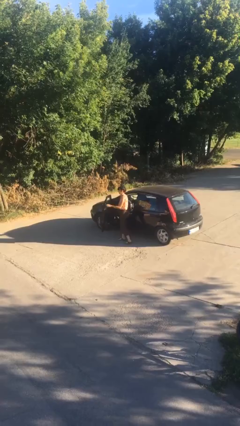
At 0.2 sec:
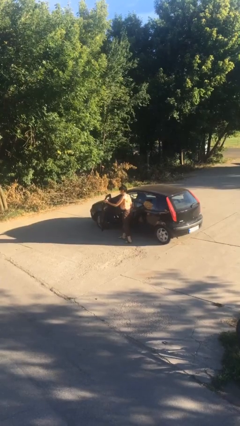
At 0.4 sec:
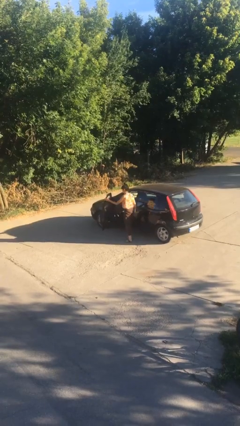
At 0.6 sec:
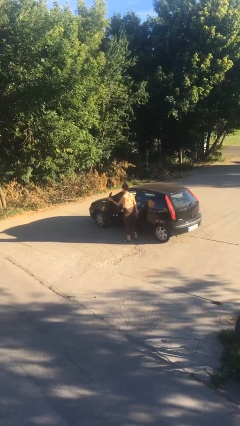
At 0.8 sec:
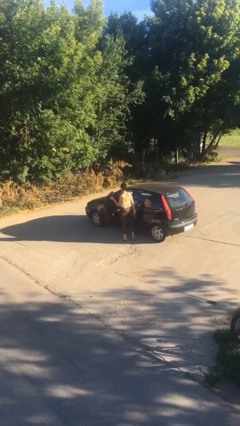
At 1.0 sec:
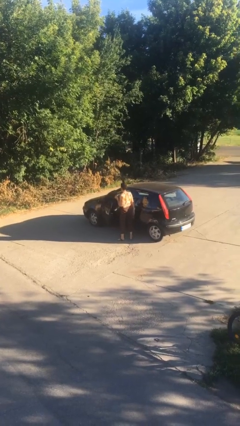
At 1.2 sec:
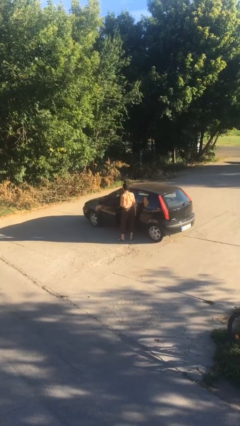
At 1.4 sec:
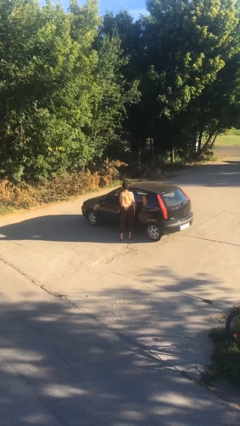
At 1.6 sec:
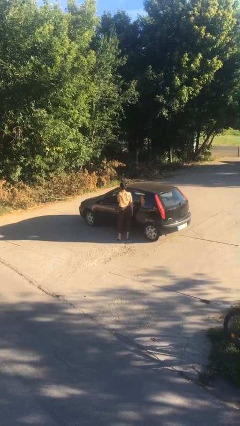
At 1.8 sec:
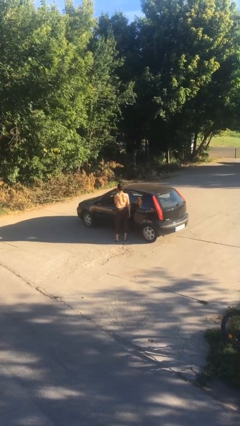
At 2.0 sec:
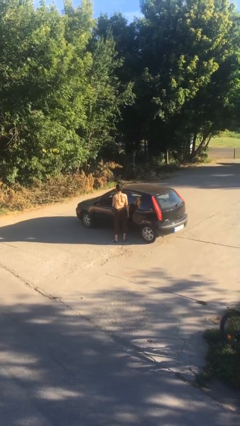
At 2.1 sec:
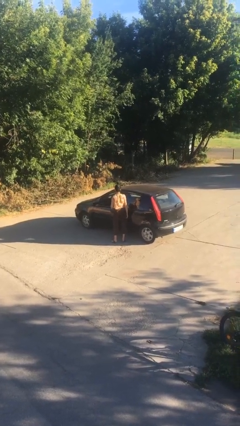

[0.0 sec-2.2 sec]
person closes car door

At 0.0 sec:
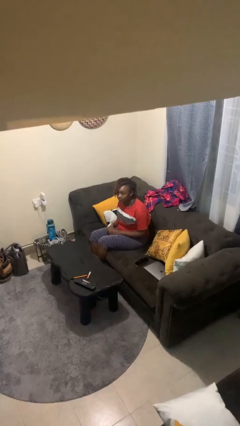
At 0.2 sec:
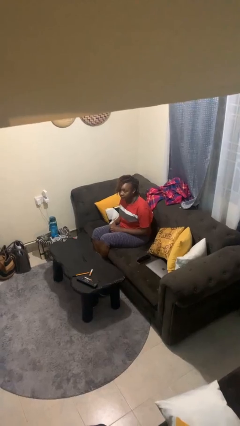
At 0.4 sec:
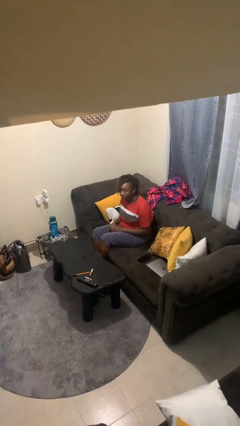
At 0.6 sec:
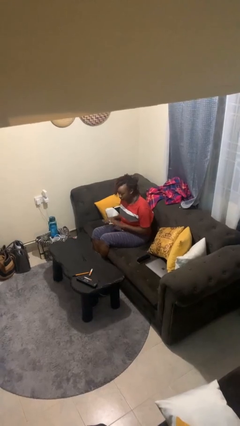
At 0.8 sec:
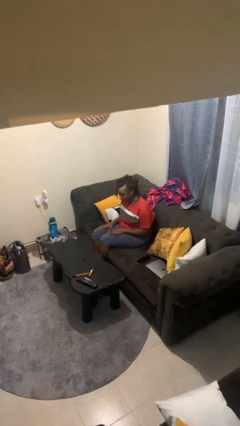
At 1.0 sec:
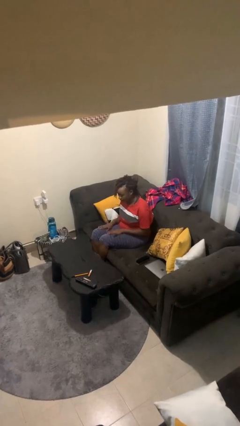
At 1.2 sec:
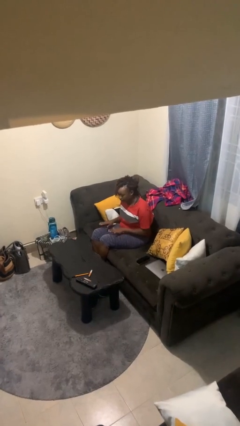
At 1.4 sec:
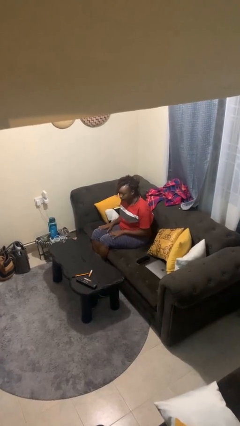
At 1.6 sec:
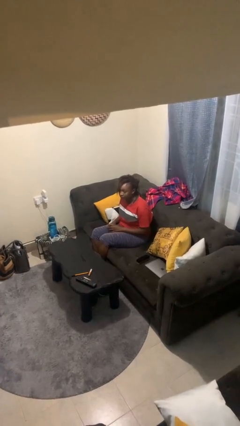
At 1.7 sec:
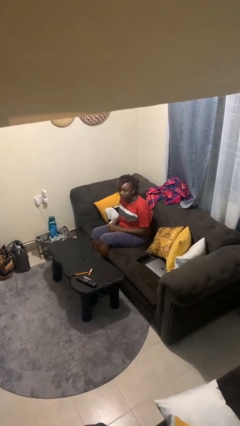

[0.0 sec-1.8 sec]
person slaps hands on thighs

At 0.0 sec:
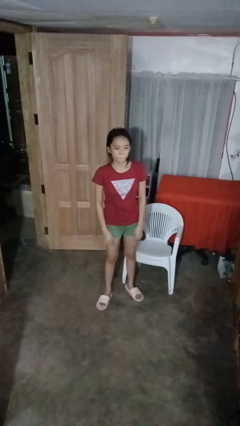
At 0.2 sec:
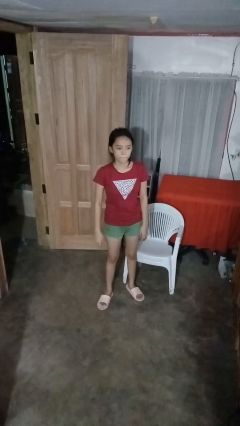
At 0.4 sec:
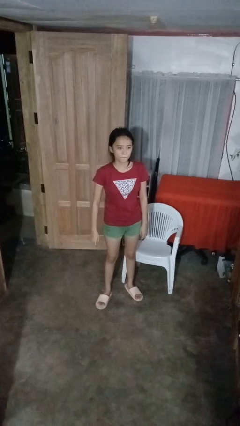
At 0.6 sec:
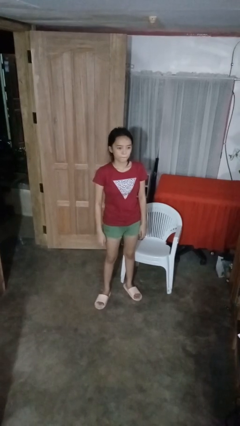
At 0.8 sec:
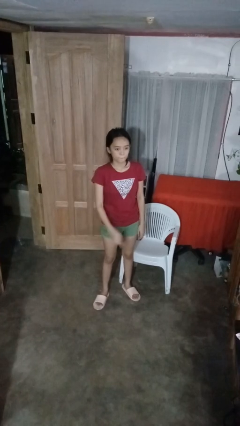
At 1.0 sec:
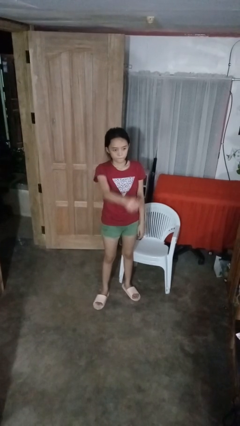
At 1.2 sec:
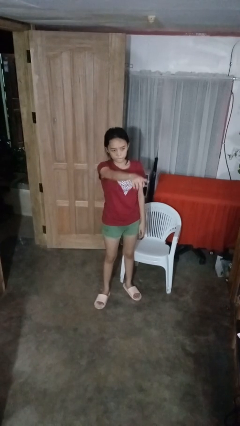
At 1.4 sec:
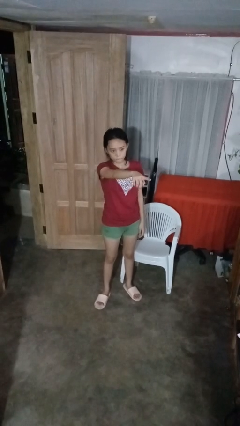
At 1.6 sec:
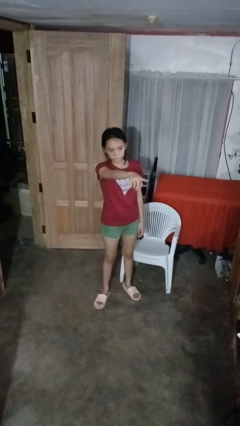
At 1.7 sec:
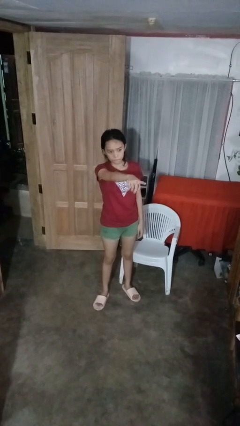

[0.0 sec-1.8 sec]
person points at person

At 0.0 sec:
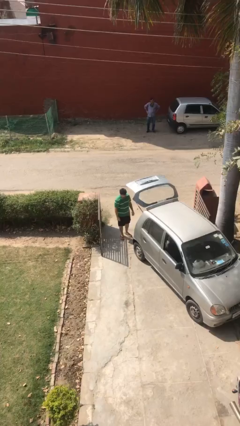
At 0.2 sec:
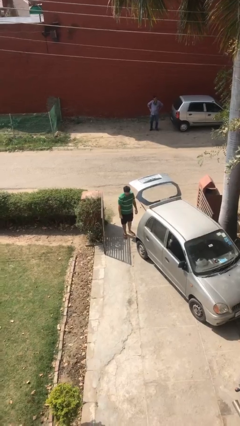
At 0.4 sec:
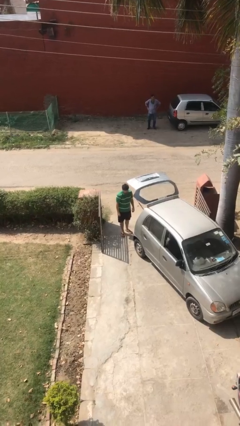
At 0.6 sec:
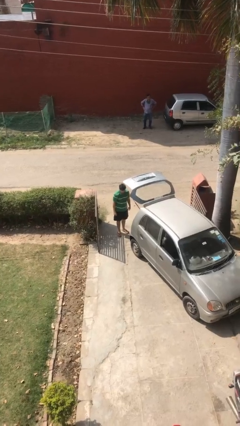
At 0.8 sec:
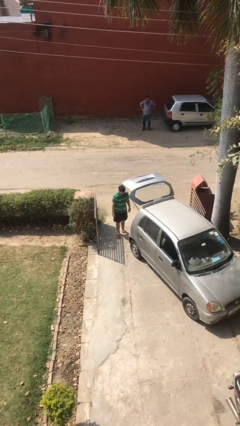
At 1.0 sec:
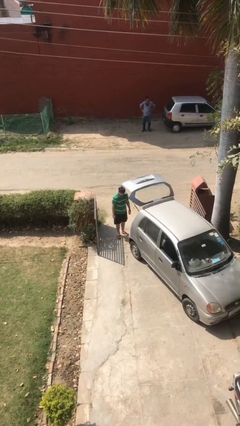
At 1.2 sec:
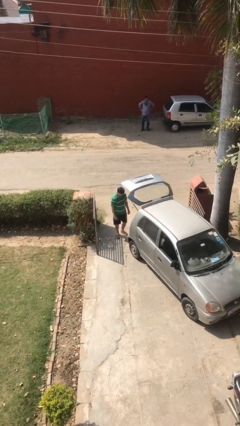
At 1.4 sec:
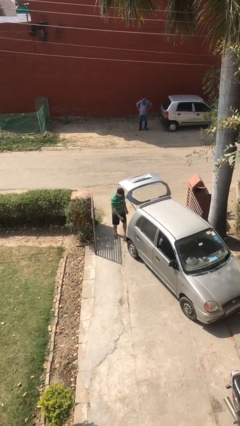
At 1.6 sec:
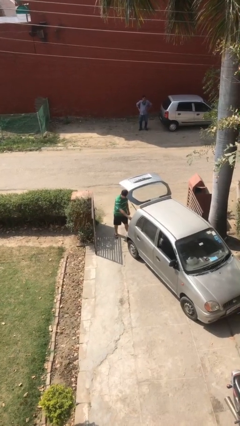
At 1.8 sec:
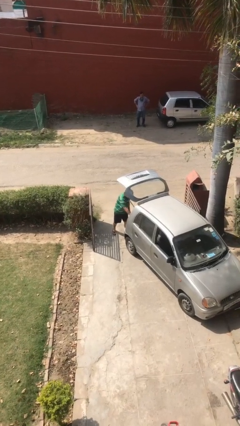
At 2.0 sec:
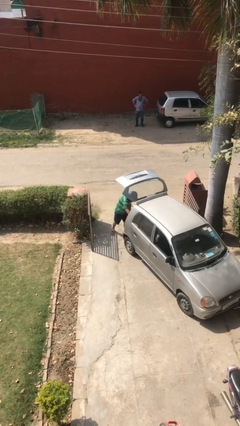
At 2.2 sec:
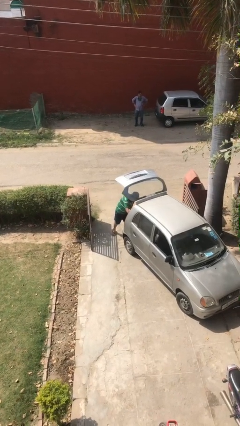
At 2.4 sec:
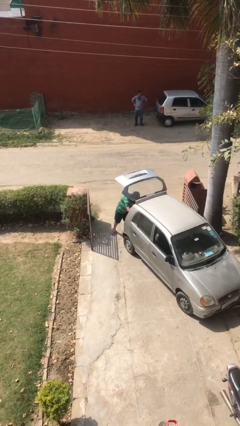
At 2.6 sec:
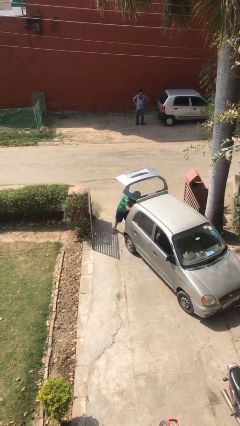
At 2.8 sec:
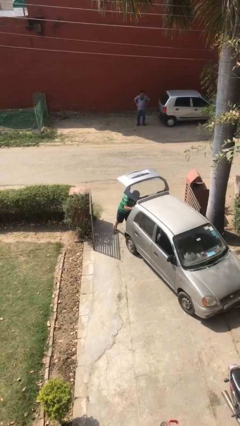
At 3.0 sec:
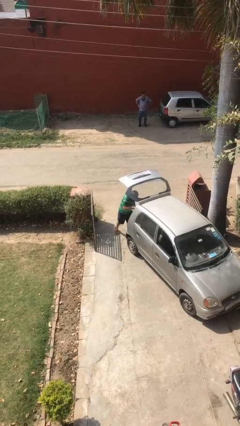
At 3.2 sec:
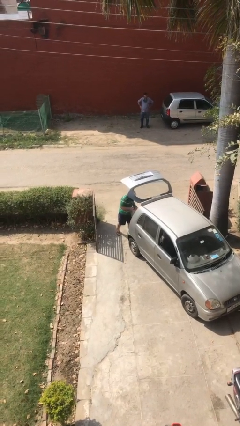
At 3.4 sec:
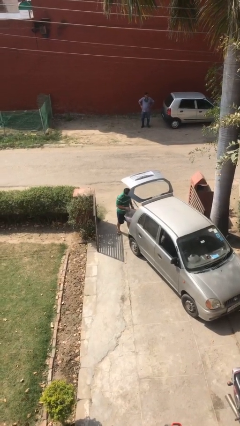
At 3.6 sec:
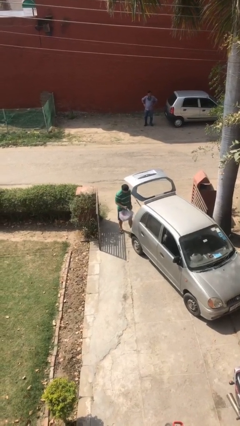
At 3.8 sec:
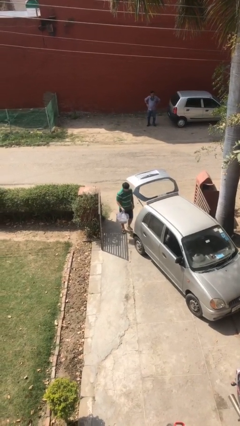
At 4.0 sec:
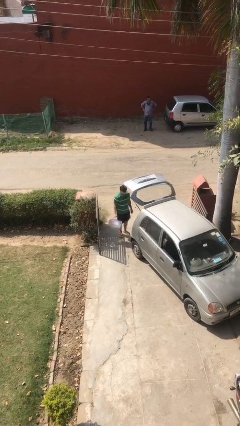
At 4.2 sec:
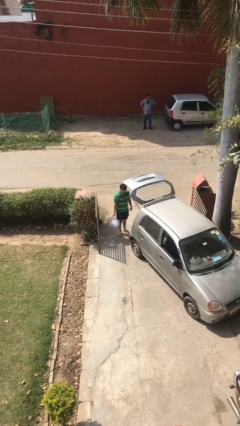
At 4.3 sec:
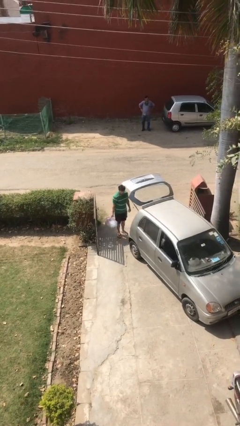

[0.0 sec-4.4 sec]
person unloads car

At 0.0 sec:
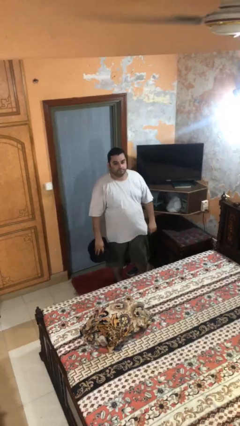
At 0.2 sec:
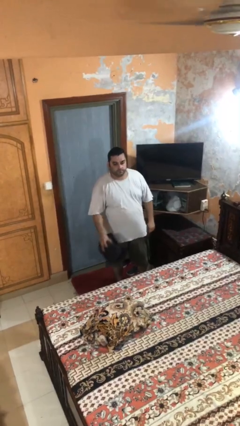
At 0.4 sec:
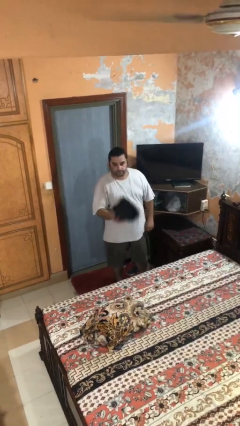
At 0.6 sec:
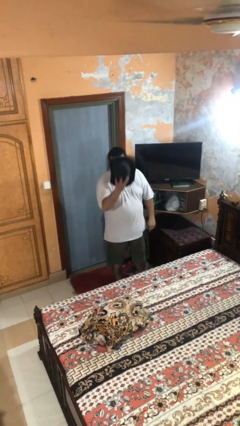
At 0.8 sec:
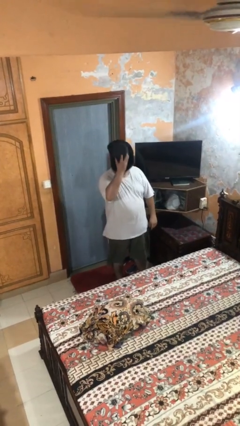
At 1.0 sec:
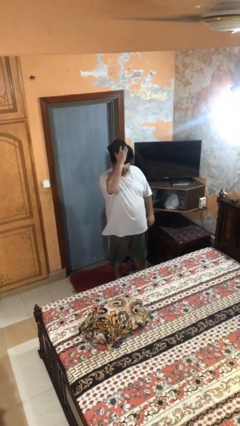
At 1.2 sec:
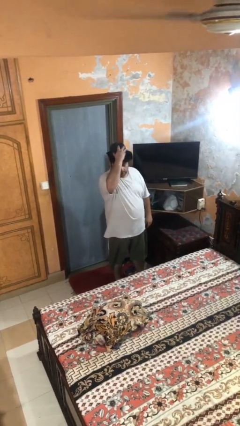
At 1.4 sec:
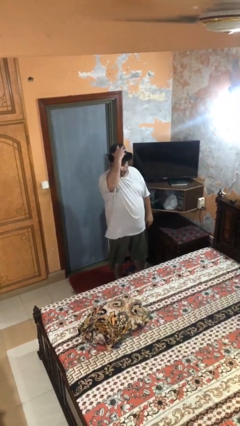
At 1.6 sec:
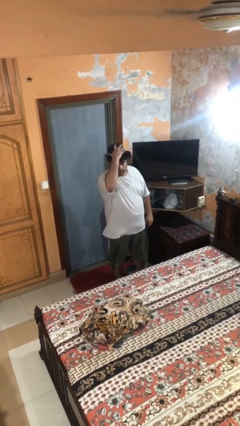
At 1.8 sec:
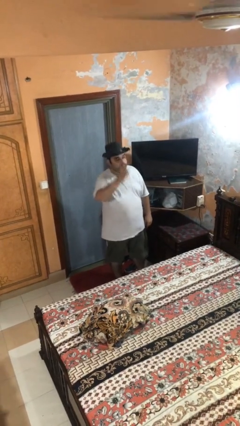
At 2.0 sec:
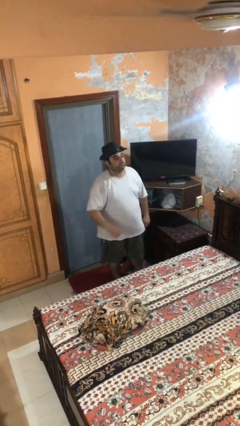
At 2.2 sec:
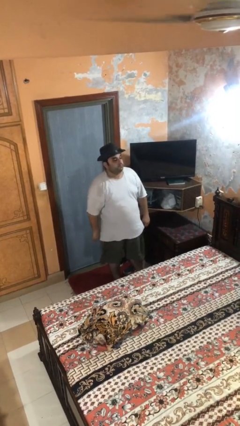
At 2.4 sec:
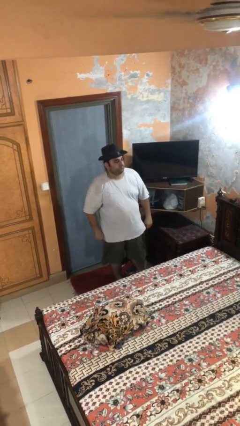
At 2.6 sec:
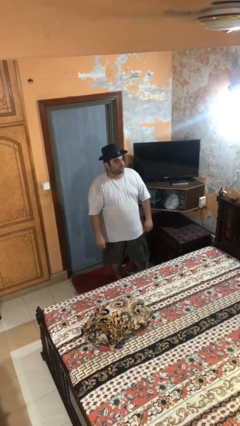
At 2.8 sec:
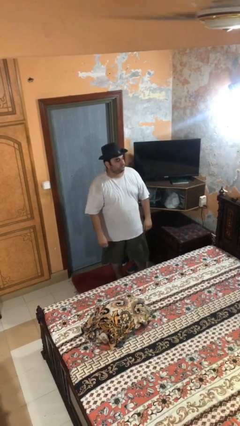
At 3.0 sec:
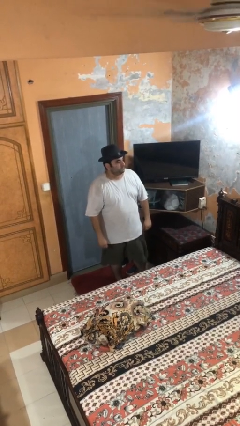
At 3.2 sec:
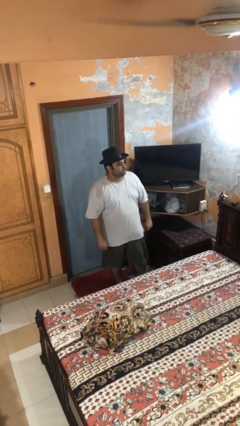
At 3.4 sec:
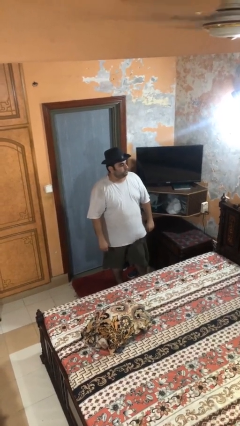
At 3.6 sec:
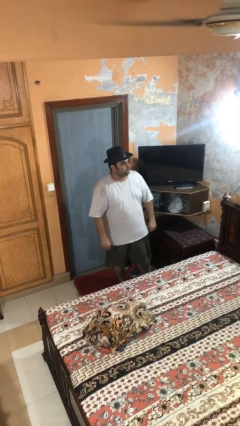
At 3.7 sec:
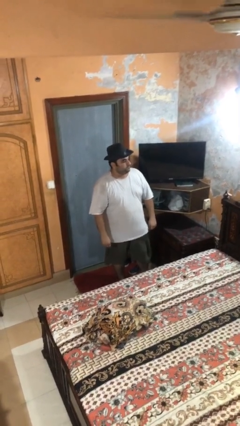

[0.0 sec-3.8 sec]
person puts on hat

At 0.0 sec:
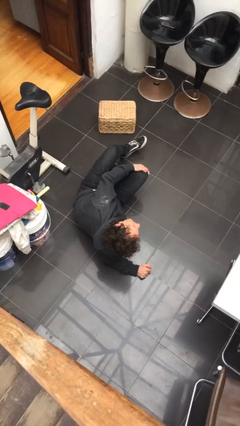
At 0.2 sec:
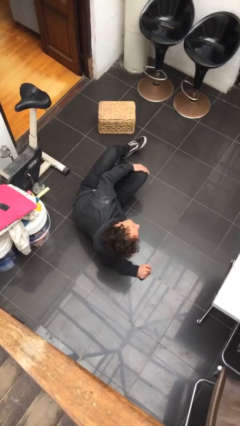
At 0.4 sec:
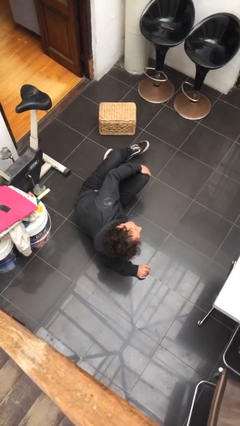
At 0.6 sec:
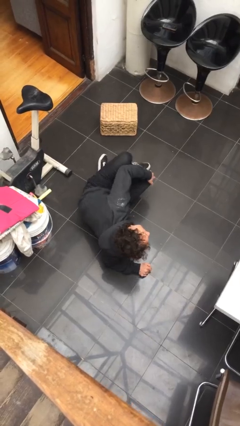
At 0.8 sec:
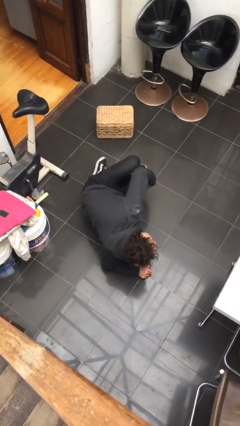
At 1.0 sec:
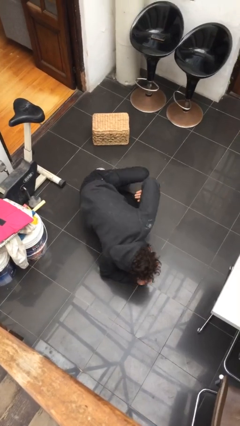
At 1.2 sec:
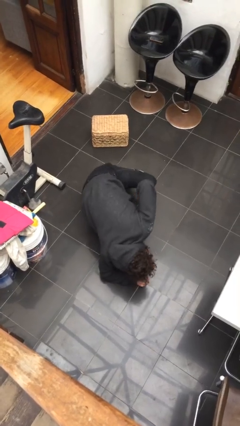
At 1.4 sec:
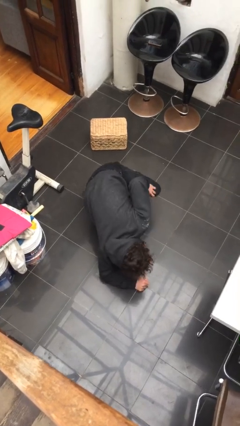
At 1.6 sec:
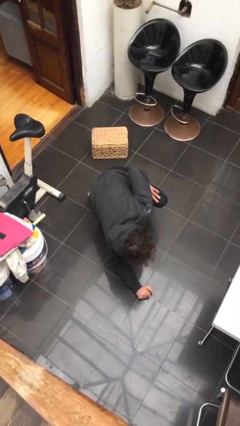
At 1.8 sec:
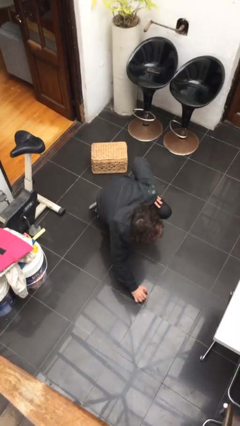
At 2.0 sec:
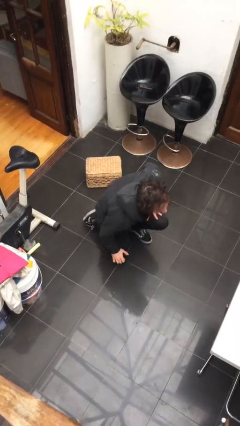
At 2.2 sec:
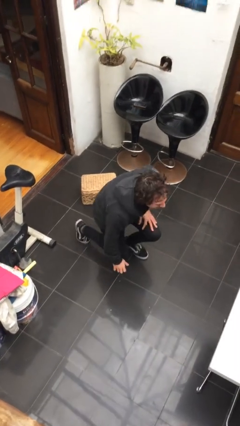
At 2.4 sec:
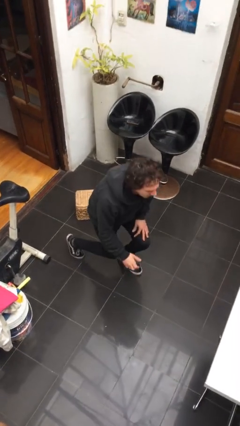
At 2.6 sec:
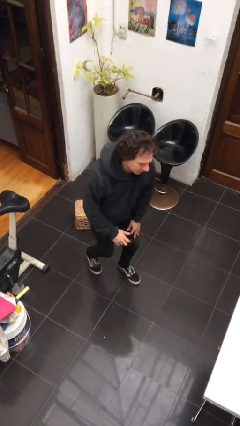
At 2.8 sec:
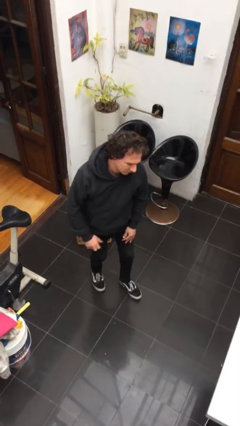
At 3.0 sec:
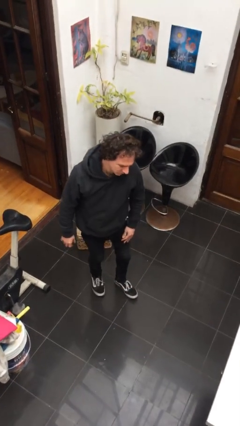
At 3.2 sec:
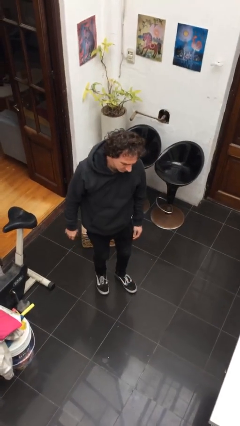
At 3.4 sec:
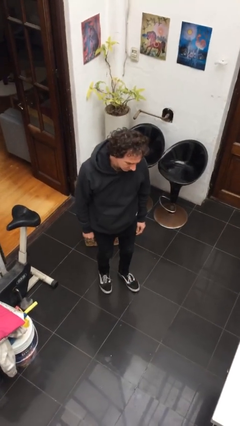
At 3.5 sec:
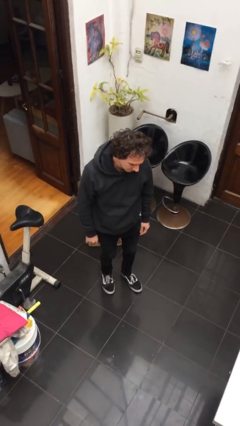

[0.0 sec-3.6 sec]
person stands up from floor
